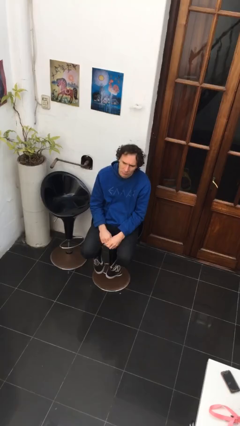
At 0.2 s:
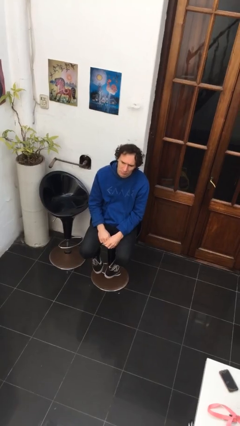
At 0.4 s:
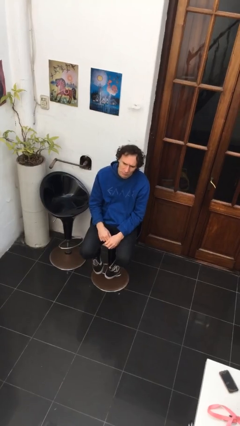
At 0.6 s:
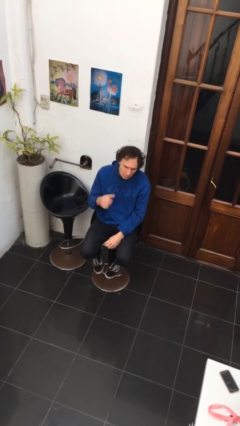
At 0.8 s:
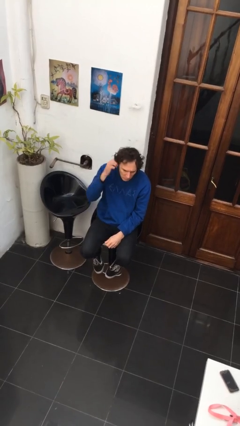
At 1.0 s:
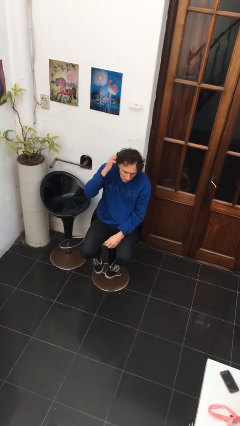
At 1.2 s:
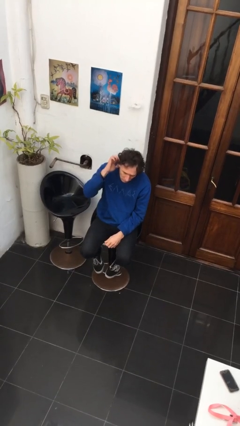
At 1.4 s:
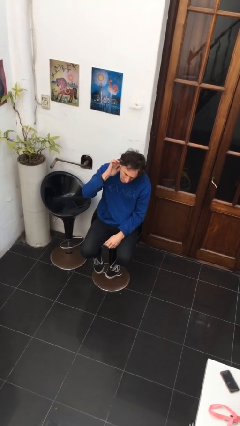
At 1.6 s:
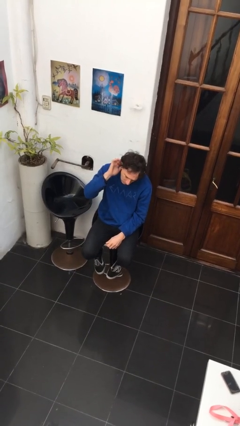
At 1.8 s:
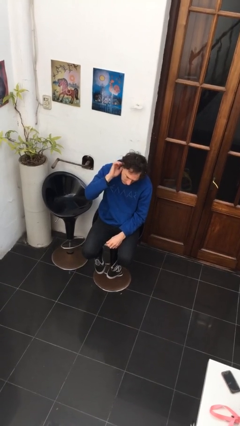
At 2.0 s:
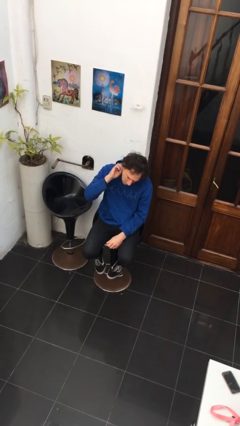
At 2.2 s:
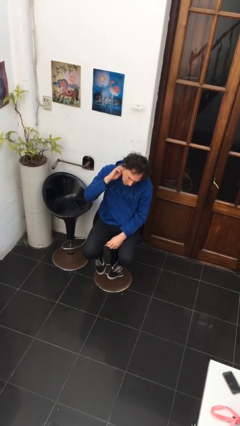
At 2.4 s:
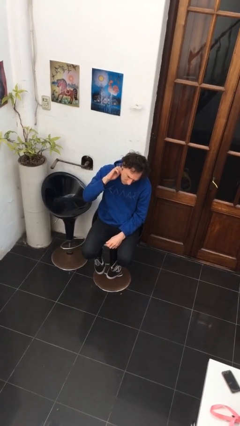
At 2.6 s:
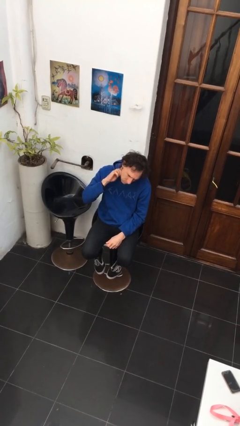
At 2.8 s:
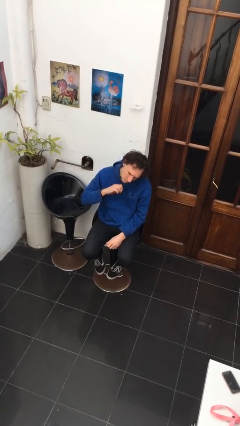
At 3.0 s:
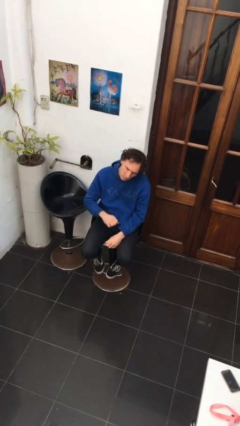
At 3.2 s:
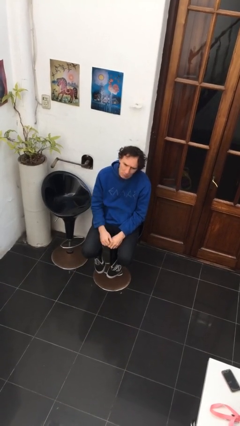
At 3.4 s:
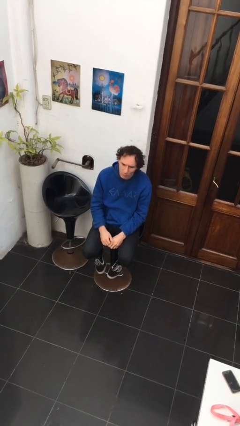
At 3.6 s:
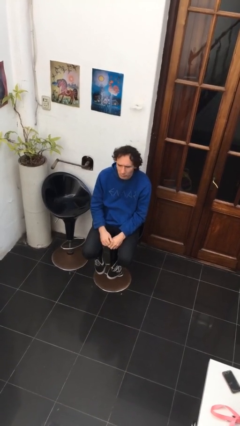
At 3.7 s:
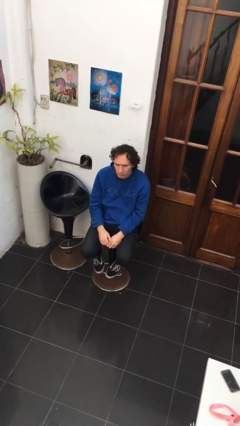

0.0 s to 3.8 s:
person strokes hair

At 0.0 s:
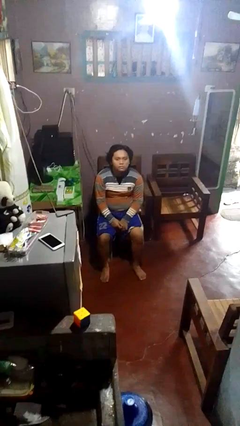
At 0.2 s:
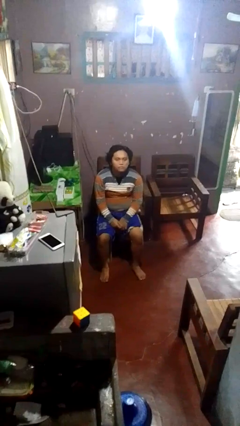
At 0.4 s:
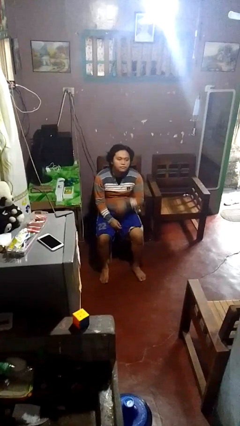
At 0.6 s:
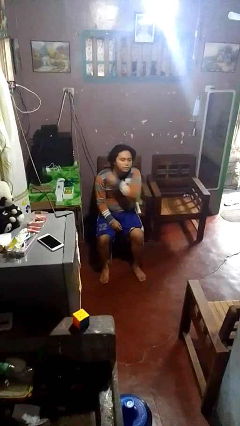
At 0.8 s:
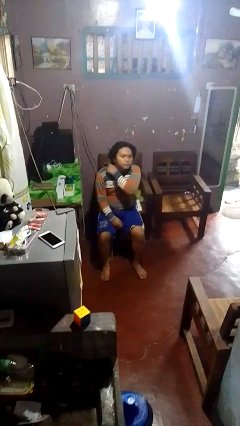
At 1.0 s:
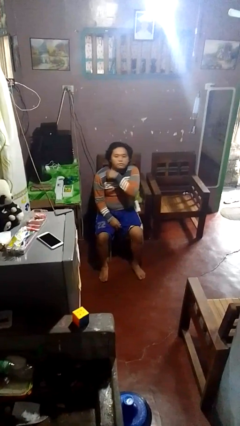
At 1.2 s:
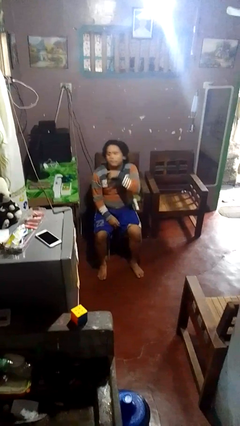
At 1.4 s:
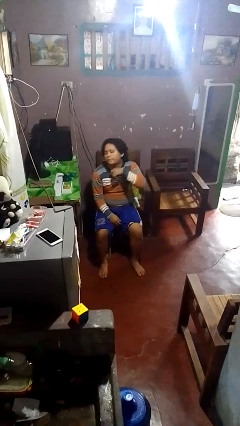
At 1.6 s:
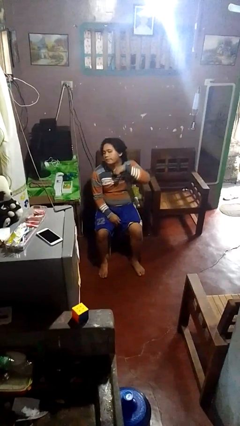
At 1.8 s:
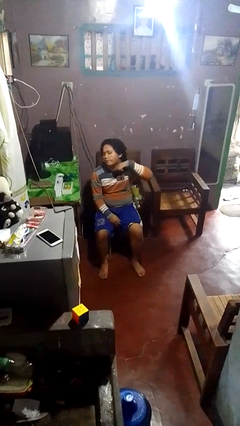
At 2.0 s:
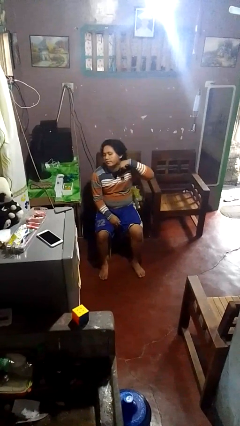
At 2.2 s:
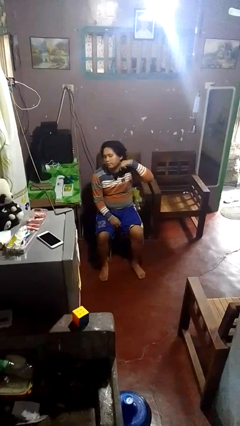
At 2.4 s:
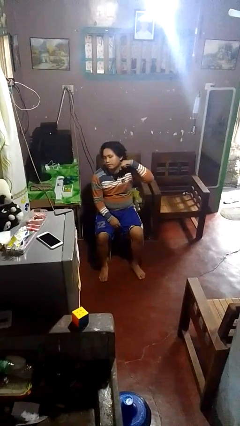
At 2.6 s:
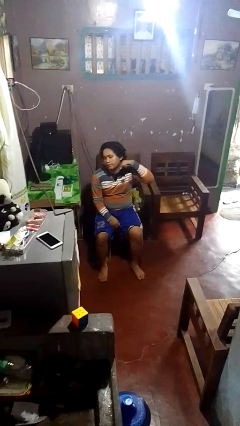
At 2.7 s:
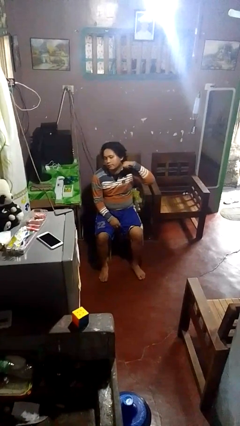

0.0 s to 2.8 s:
person gestures cut

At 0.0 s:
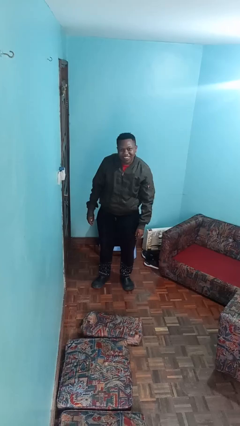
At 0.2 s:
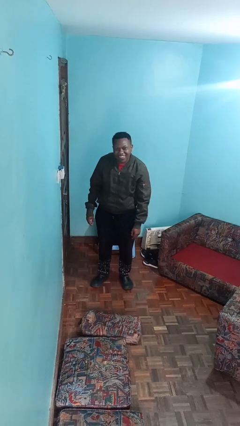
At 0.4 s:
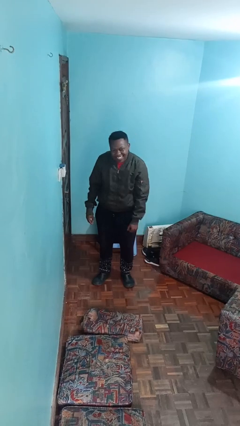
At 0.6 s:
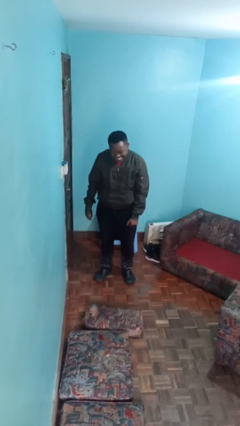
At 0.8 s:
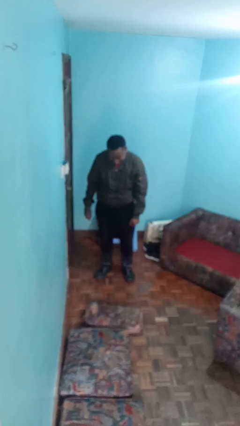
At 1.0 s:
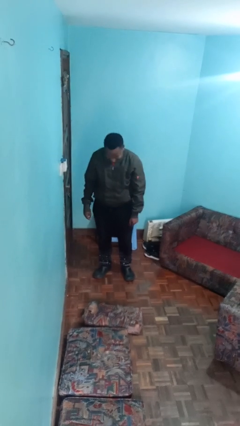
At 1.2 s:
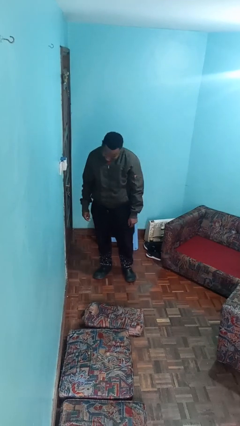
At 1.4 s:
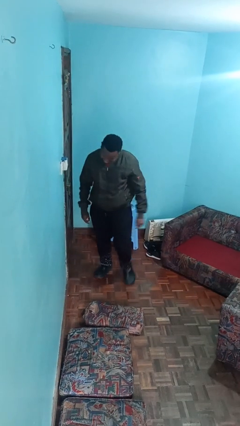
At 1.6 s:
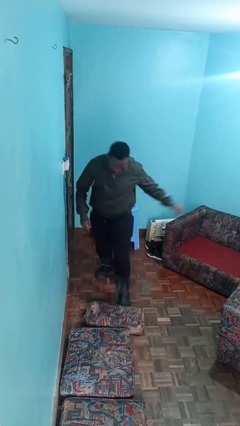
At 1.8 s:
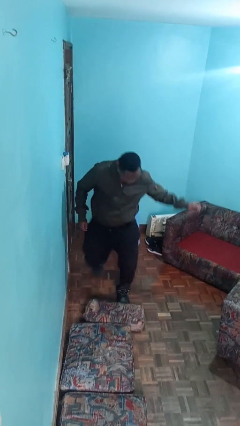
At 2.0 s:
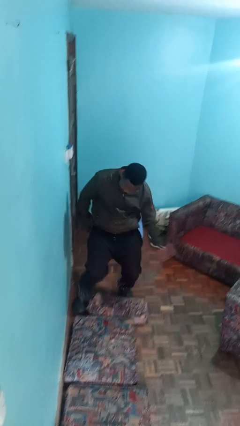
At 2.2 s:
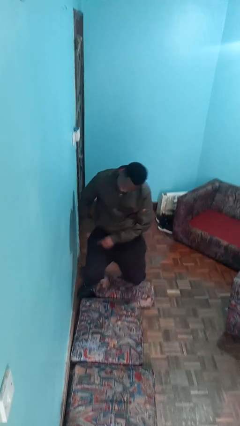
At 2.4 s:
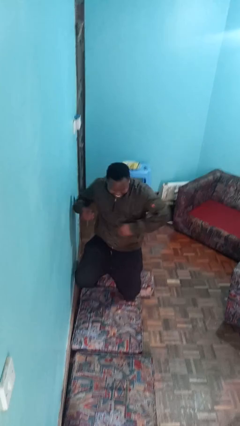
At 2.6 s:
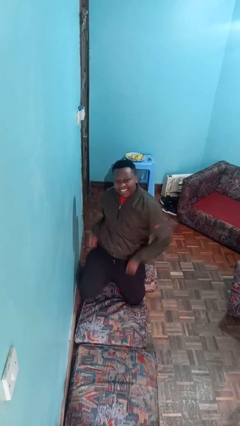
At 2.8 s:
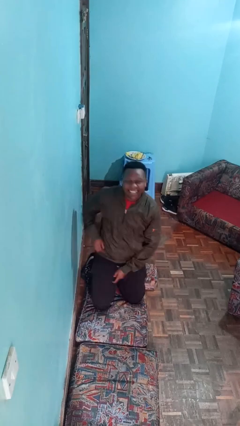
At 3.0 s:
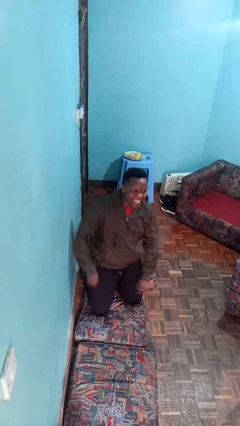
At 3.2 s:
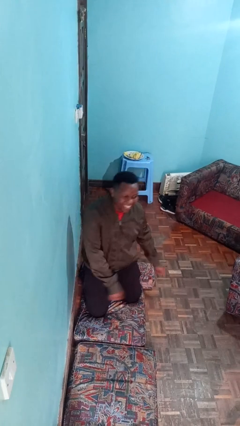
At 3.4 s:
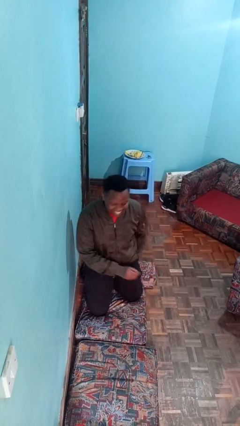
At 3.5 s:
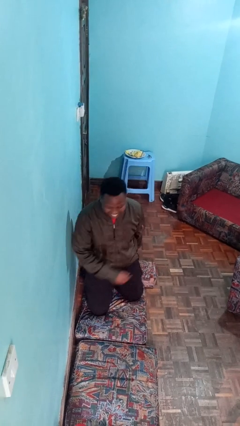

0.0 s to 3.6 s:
person trips on object on floor

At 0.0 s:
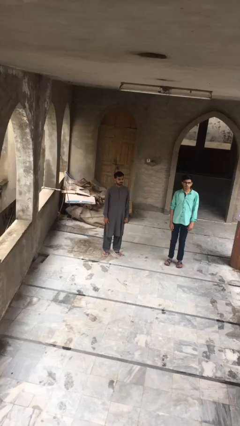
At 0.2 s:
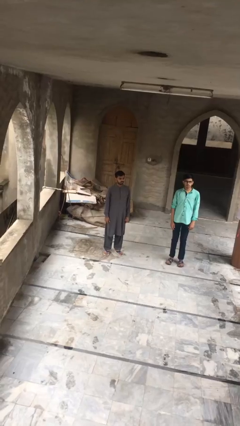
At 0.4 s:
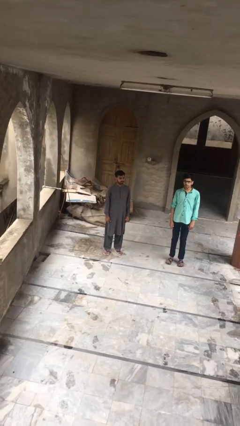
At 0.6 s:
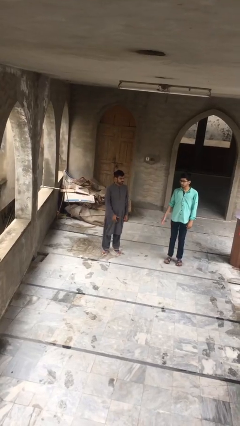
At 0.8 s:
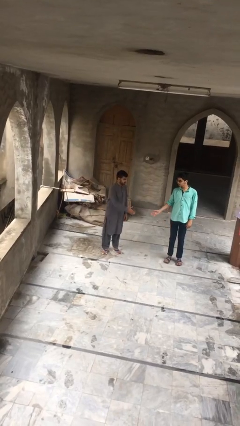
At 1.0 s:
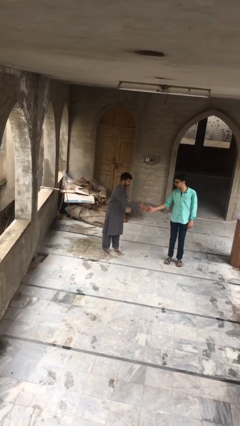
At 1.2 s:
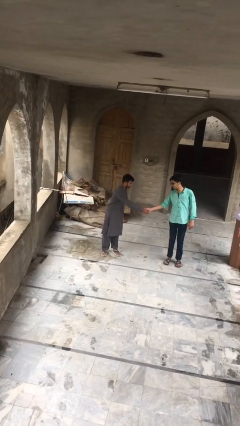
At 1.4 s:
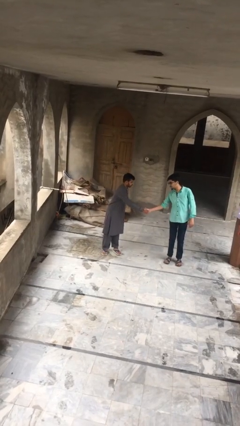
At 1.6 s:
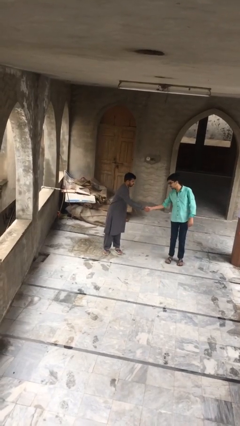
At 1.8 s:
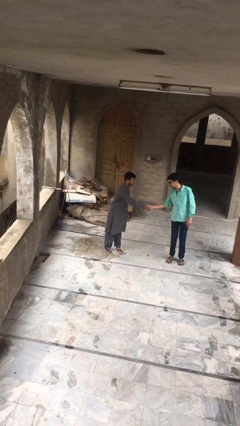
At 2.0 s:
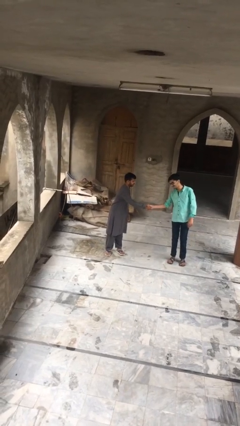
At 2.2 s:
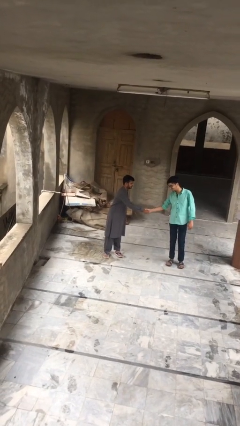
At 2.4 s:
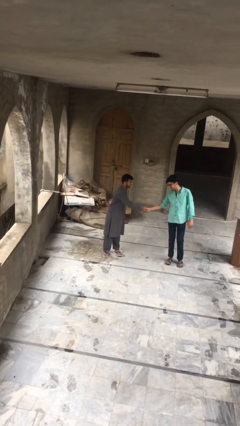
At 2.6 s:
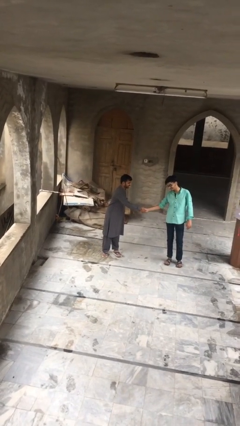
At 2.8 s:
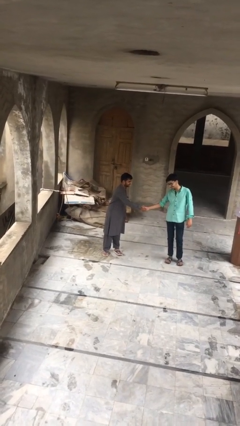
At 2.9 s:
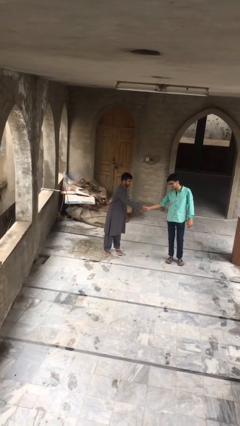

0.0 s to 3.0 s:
person shakes hand

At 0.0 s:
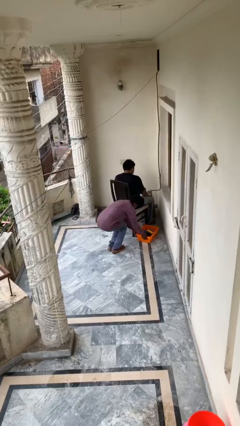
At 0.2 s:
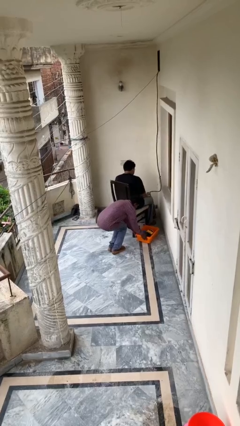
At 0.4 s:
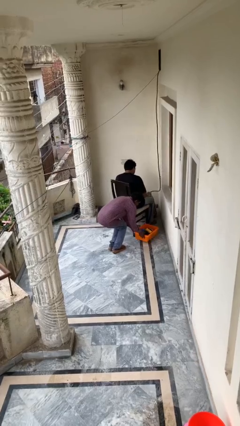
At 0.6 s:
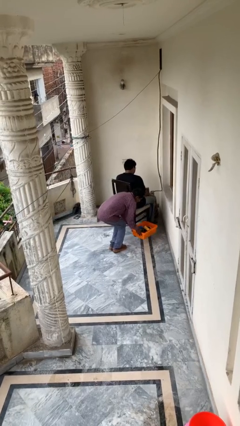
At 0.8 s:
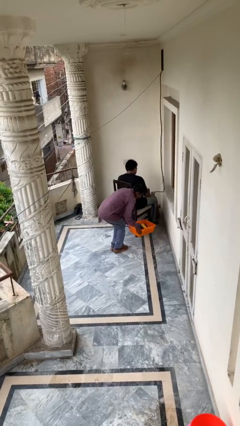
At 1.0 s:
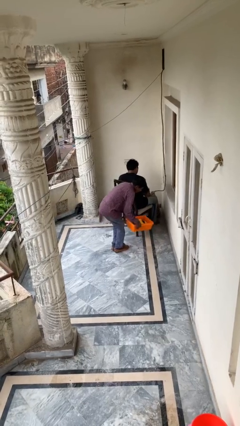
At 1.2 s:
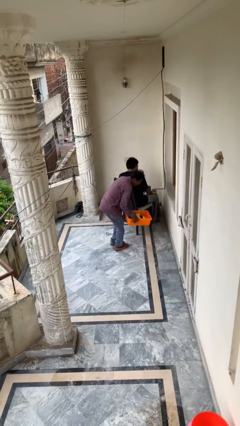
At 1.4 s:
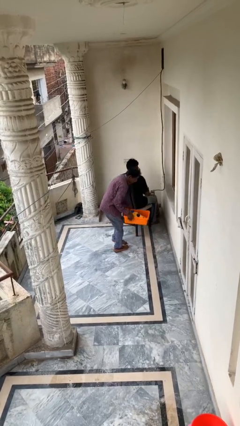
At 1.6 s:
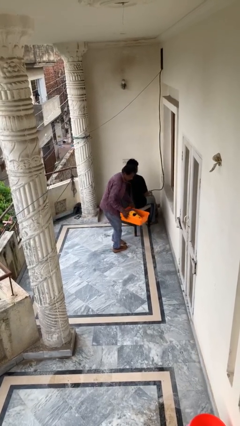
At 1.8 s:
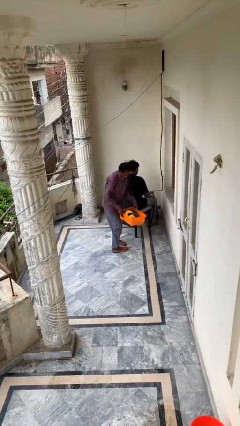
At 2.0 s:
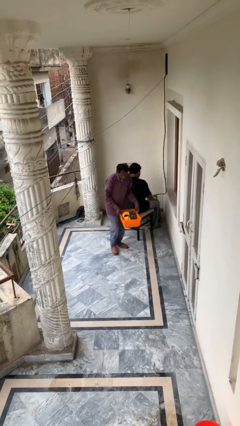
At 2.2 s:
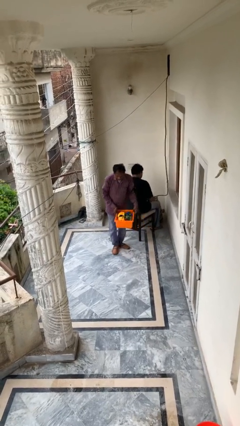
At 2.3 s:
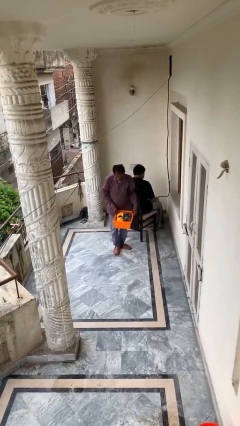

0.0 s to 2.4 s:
person steals object from person

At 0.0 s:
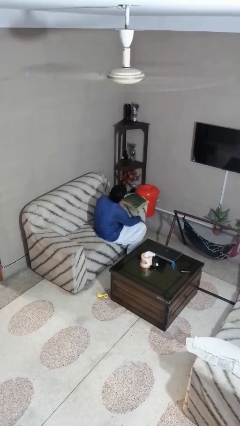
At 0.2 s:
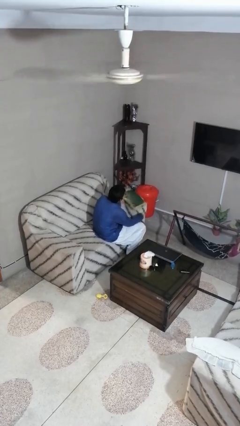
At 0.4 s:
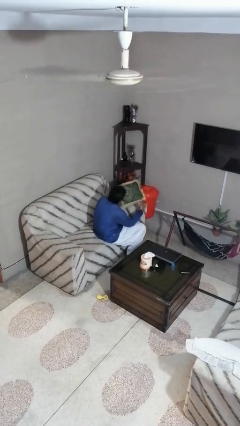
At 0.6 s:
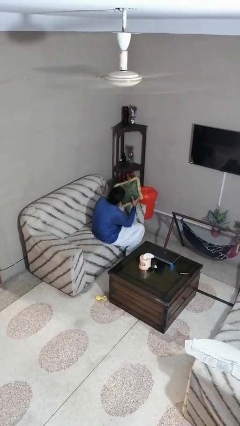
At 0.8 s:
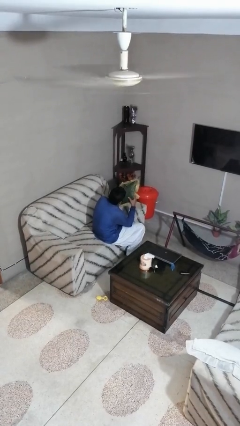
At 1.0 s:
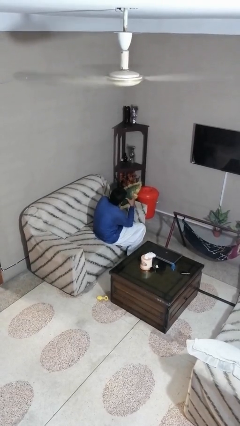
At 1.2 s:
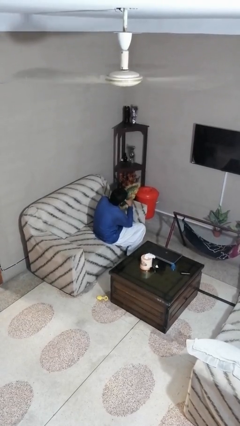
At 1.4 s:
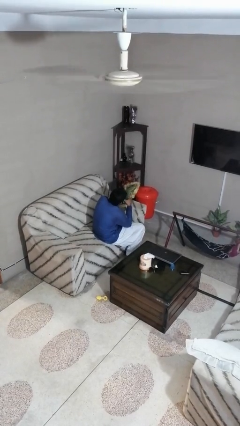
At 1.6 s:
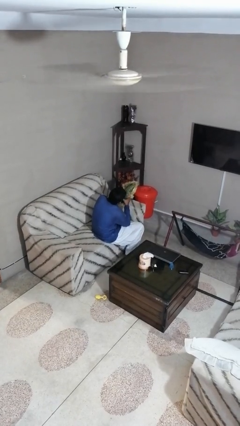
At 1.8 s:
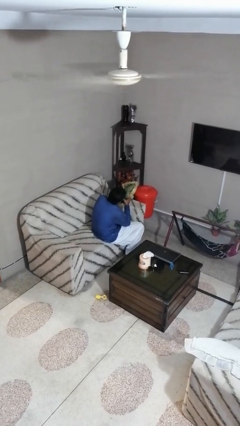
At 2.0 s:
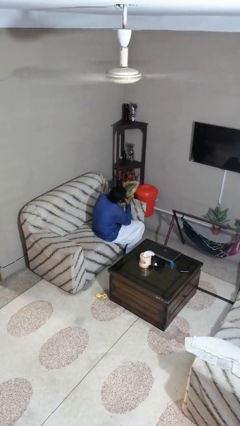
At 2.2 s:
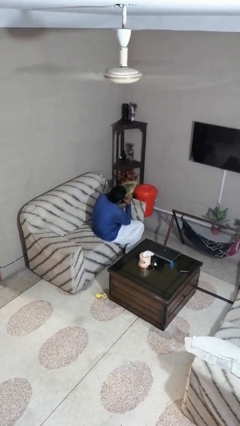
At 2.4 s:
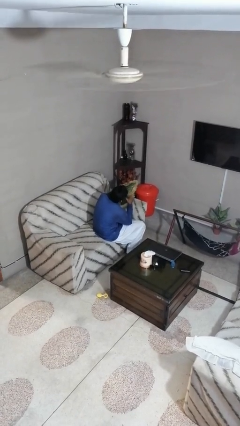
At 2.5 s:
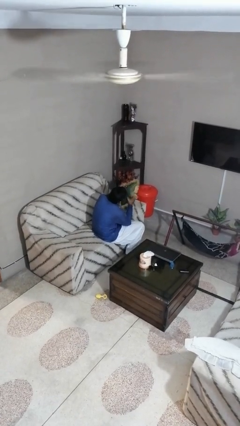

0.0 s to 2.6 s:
person squeezes object
